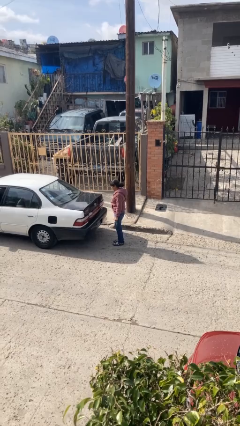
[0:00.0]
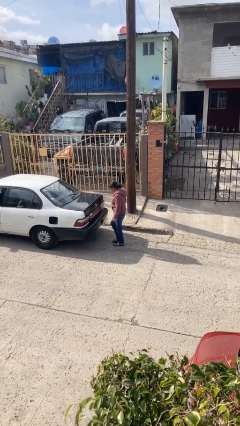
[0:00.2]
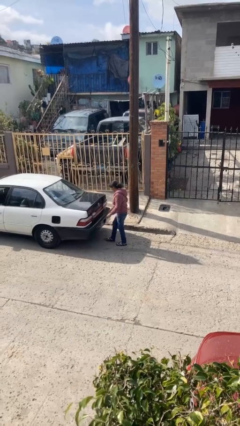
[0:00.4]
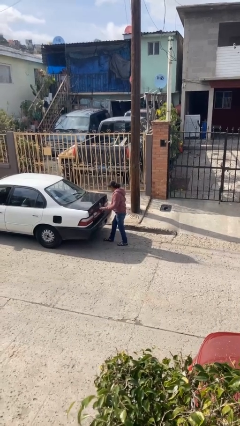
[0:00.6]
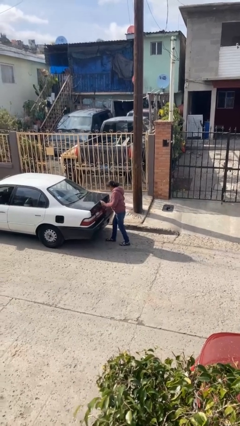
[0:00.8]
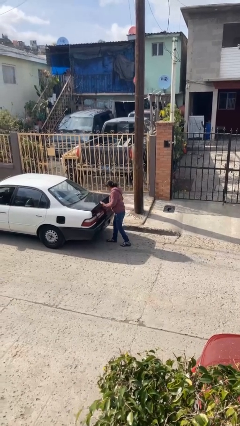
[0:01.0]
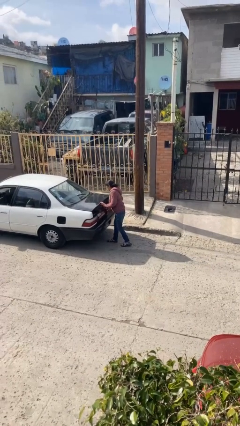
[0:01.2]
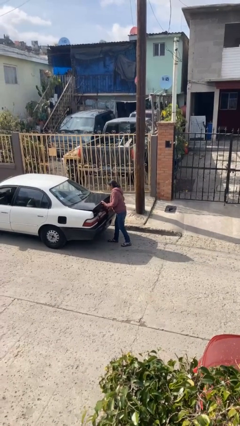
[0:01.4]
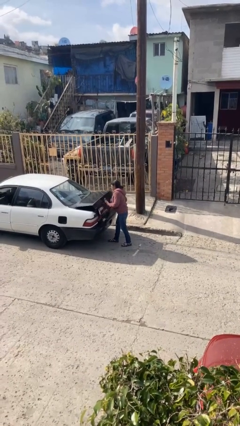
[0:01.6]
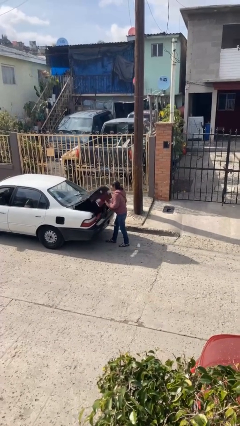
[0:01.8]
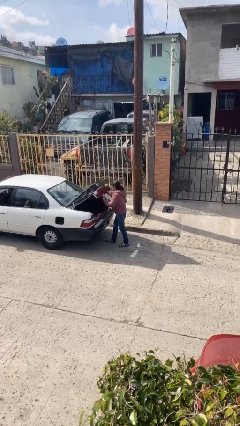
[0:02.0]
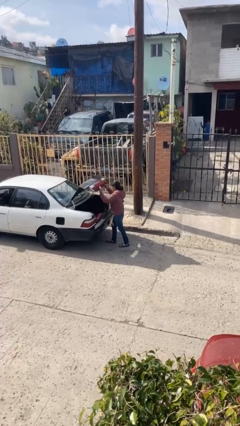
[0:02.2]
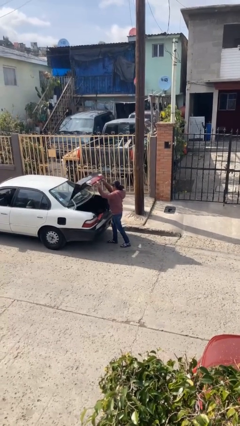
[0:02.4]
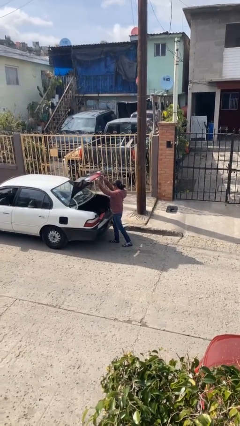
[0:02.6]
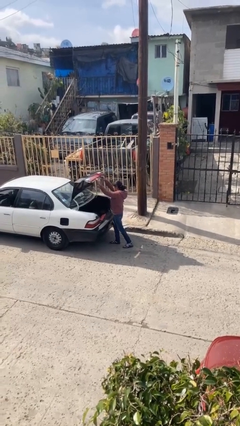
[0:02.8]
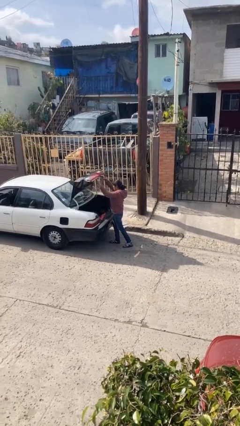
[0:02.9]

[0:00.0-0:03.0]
person opens car trunk

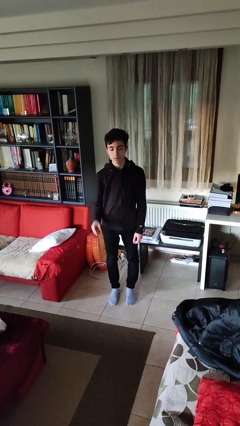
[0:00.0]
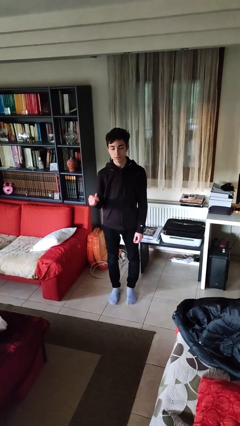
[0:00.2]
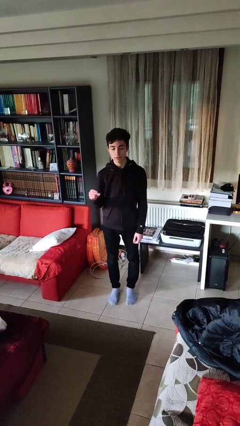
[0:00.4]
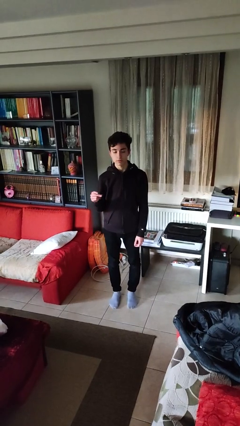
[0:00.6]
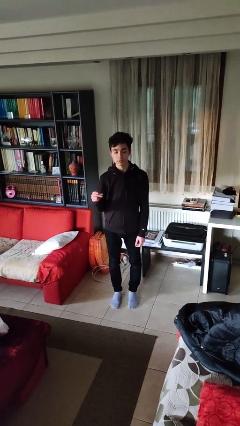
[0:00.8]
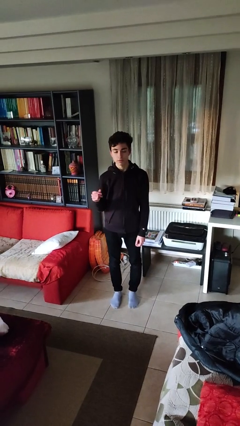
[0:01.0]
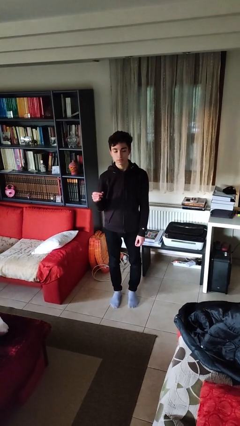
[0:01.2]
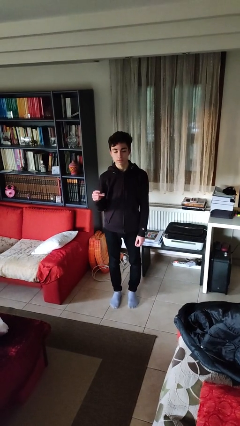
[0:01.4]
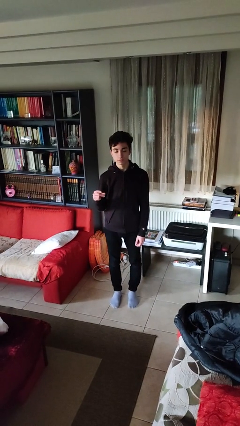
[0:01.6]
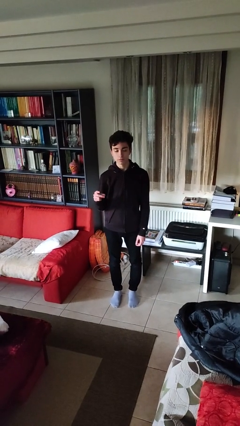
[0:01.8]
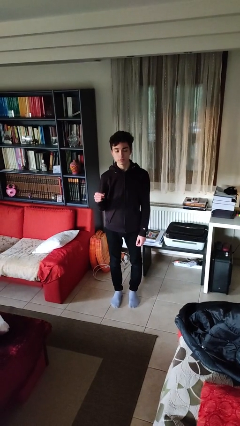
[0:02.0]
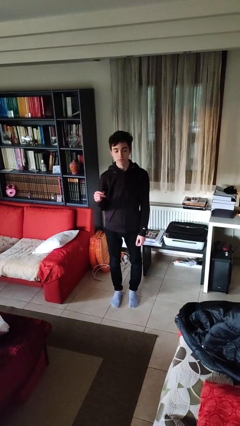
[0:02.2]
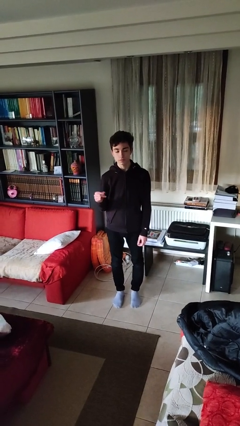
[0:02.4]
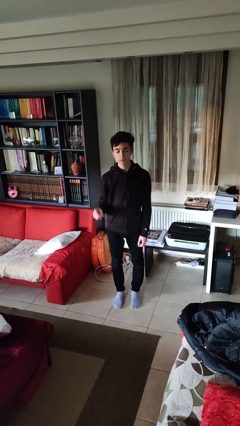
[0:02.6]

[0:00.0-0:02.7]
person snaps fingers

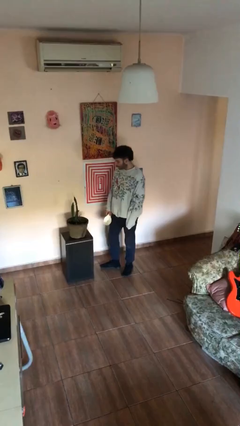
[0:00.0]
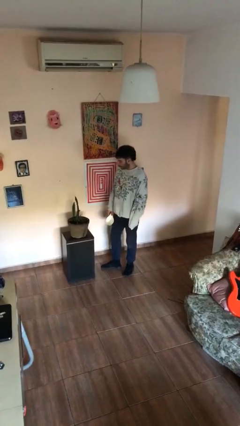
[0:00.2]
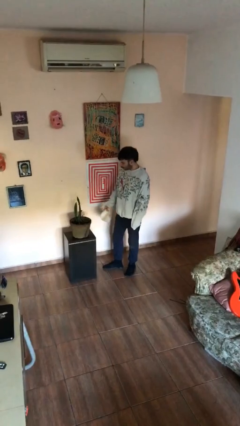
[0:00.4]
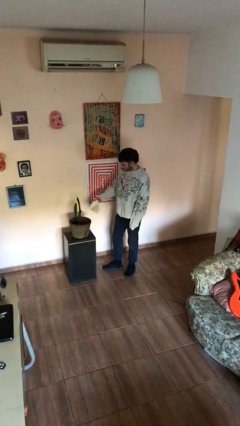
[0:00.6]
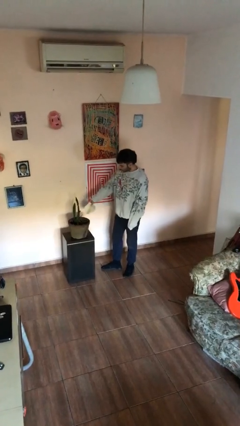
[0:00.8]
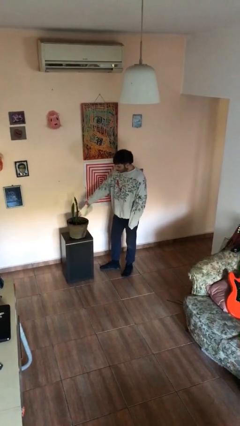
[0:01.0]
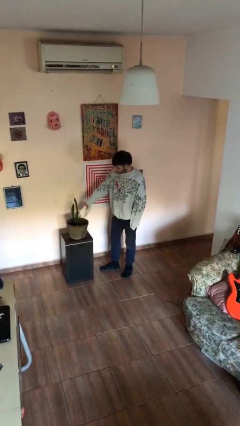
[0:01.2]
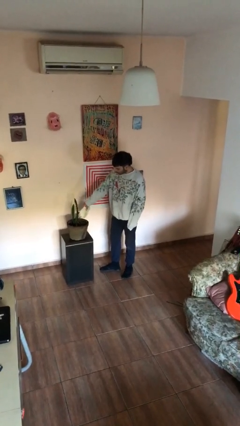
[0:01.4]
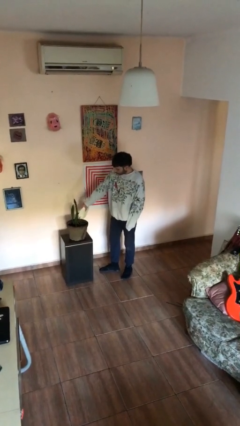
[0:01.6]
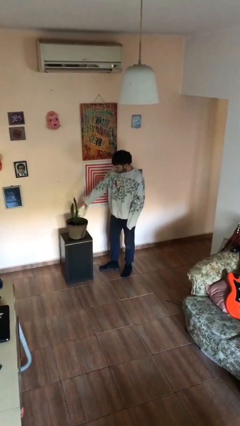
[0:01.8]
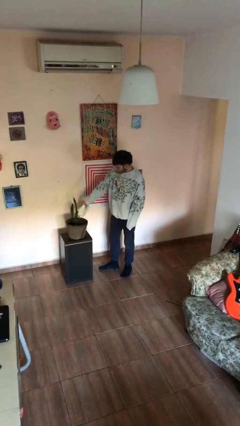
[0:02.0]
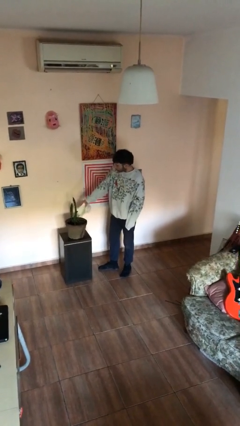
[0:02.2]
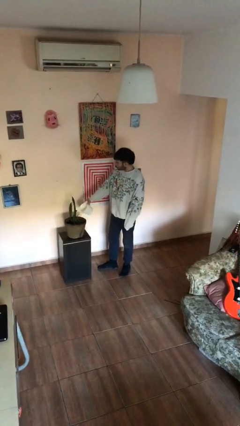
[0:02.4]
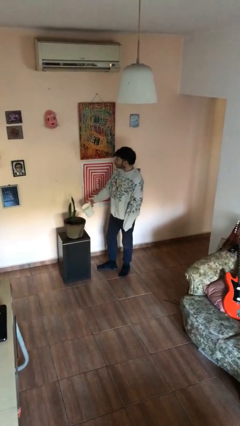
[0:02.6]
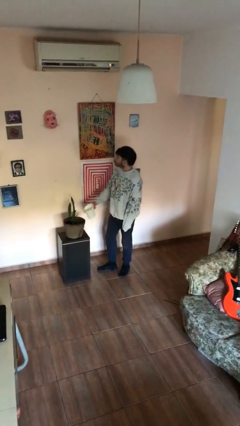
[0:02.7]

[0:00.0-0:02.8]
person waters houseplant

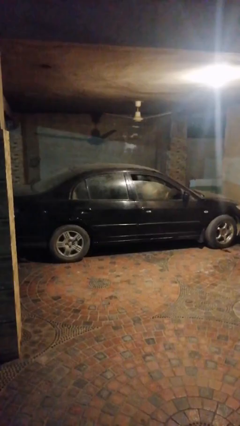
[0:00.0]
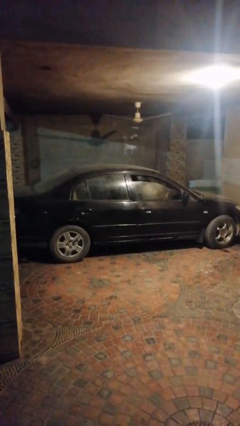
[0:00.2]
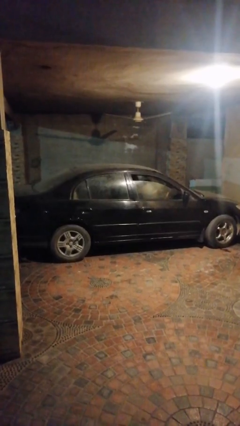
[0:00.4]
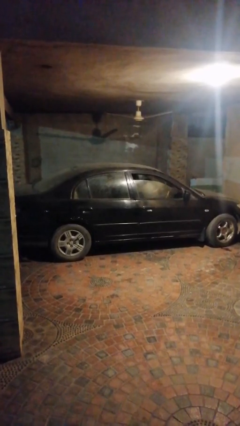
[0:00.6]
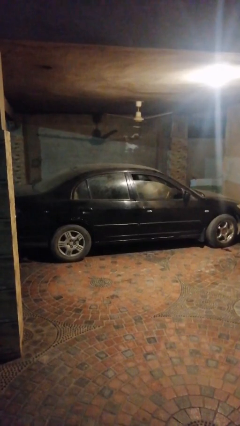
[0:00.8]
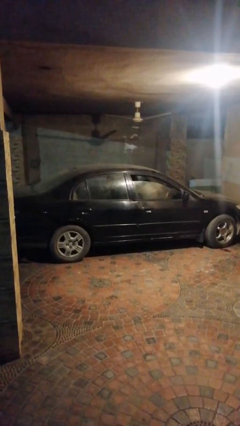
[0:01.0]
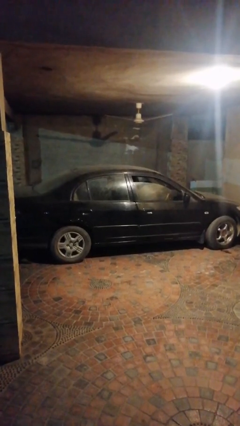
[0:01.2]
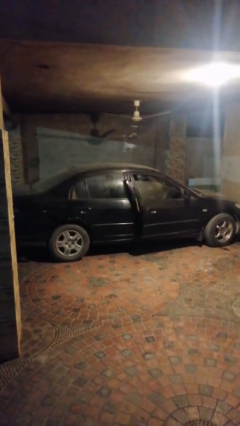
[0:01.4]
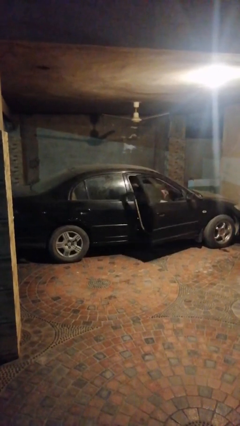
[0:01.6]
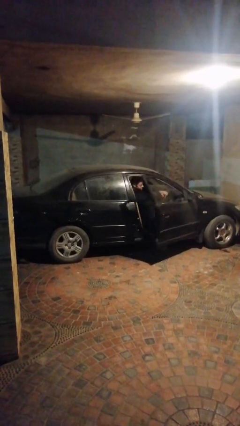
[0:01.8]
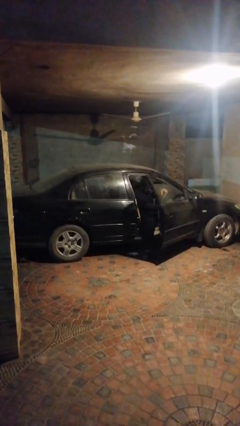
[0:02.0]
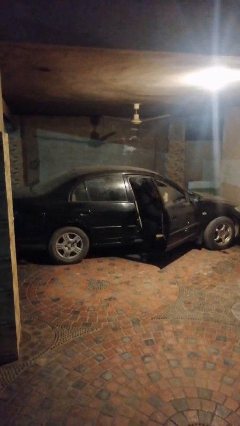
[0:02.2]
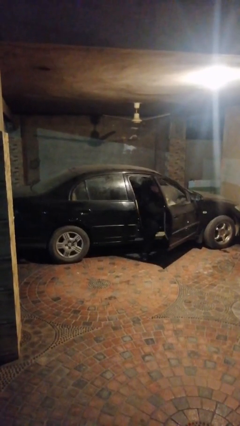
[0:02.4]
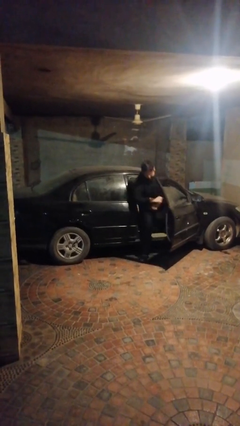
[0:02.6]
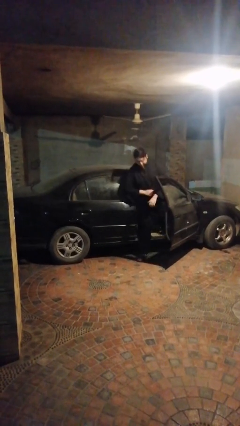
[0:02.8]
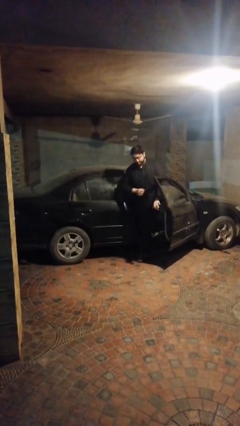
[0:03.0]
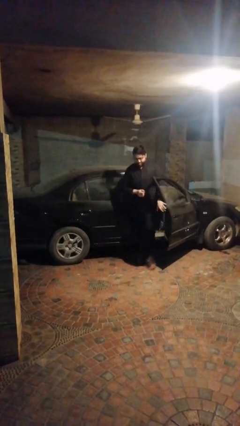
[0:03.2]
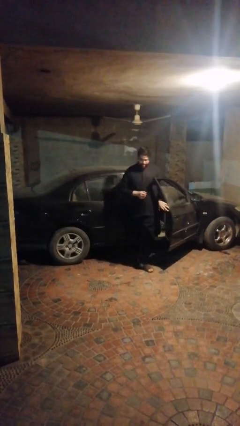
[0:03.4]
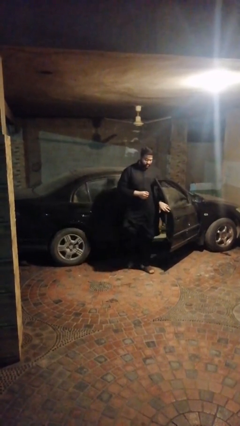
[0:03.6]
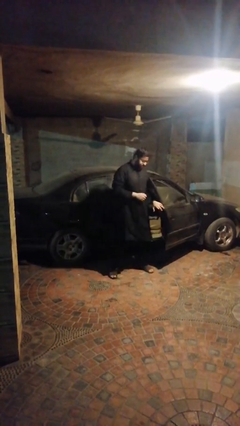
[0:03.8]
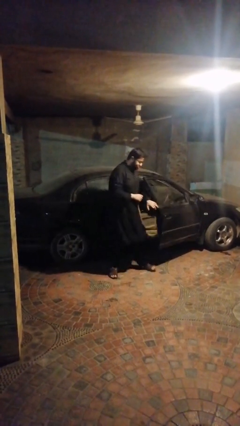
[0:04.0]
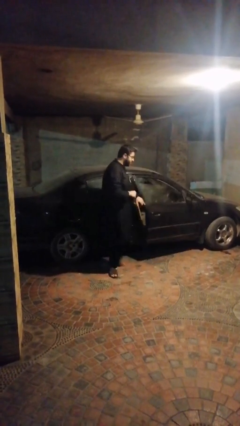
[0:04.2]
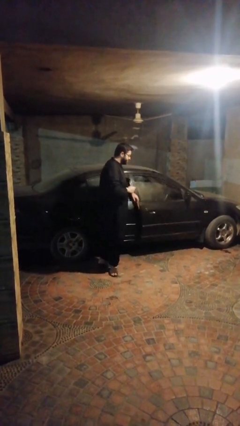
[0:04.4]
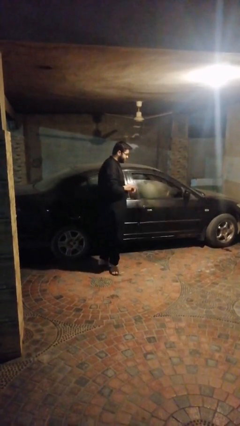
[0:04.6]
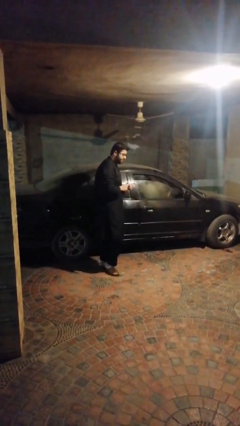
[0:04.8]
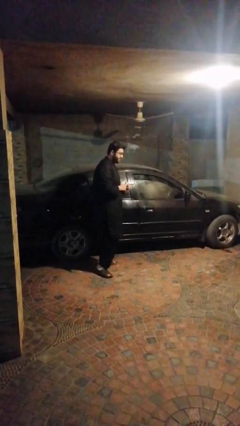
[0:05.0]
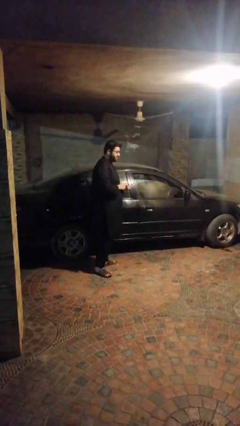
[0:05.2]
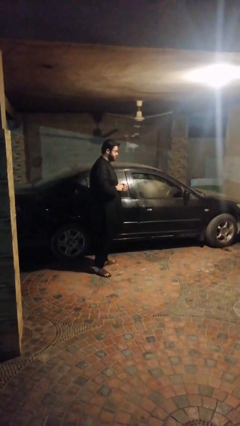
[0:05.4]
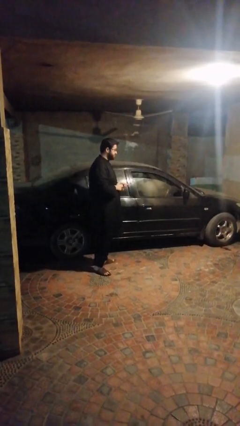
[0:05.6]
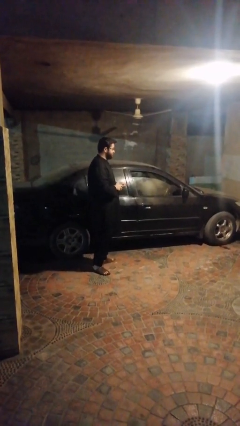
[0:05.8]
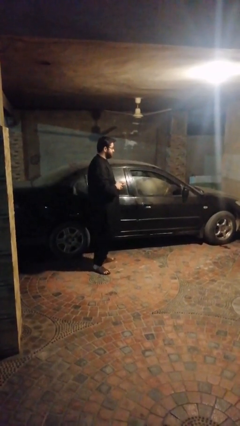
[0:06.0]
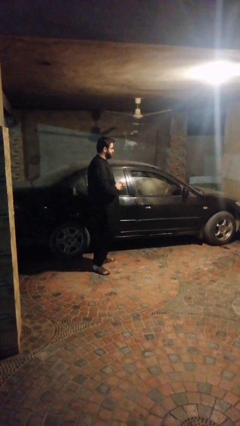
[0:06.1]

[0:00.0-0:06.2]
car drops off person

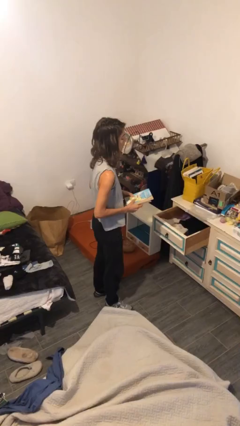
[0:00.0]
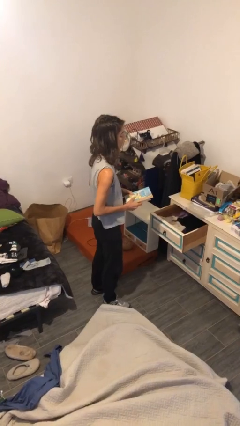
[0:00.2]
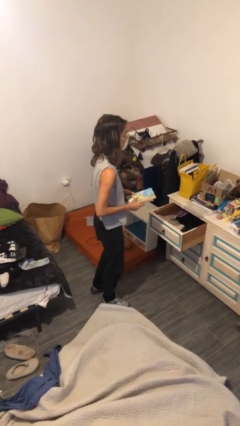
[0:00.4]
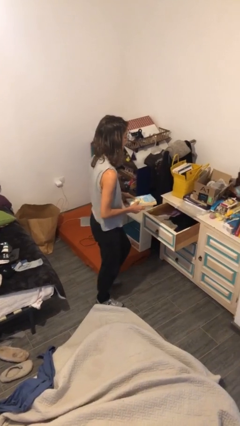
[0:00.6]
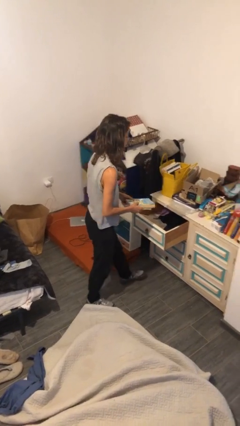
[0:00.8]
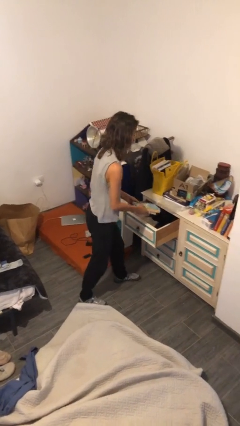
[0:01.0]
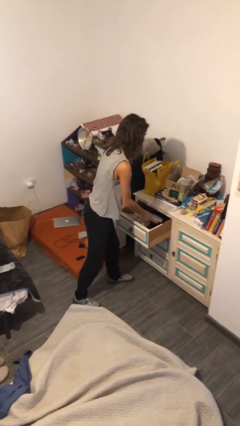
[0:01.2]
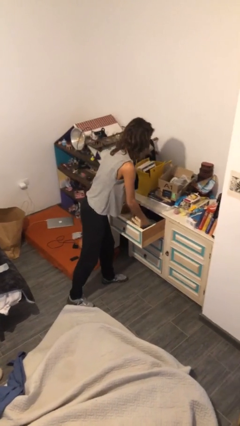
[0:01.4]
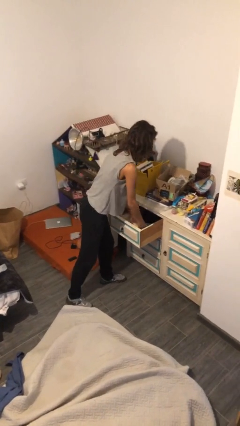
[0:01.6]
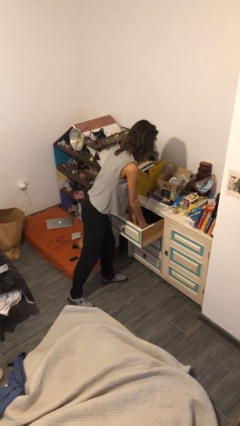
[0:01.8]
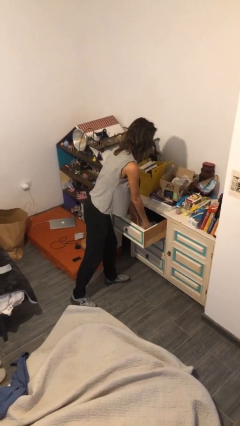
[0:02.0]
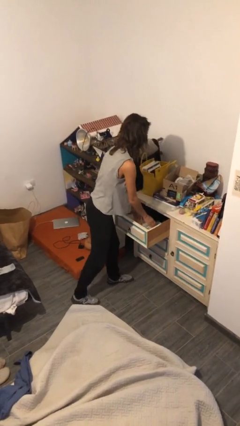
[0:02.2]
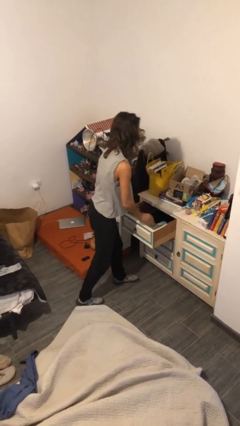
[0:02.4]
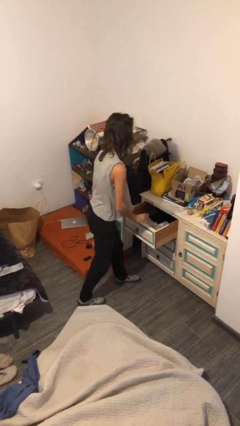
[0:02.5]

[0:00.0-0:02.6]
person puts down object into cabinet

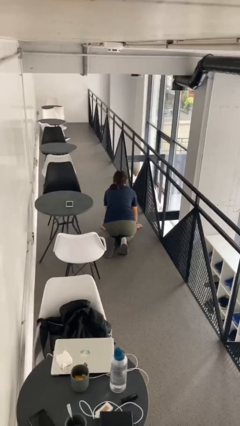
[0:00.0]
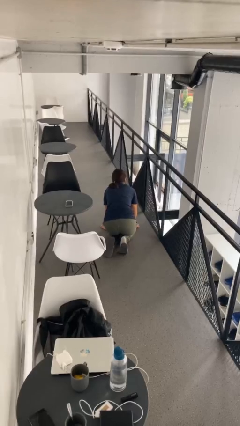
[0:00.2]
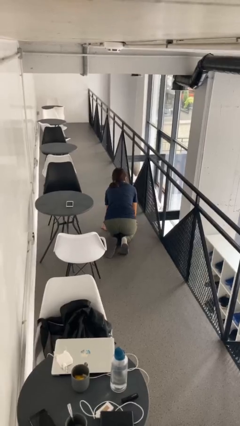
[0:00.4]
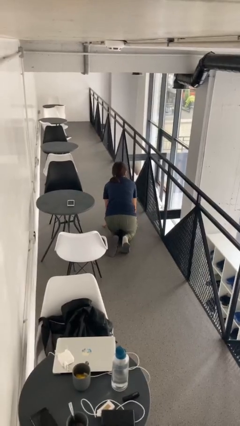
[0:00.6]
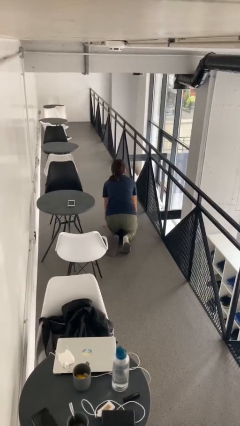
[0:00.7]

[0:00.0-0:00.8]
person stands up from floor
